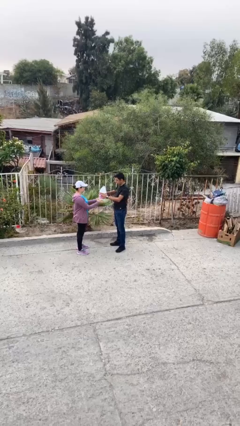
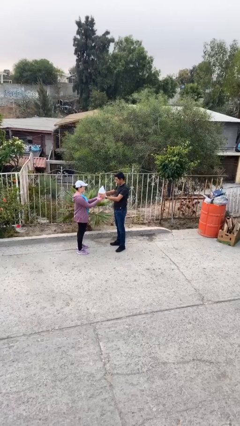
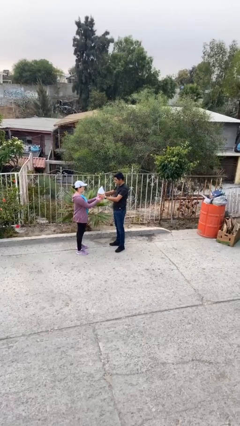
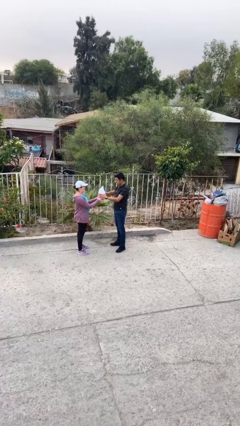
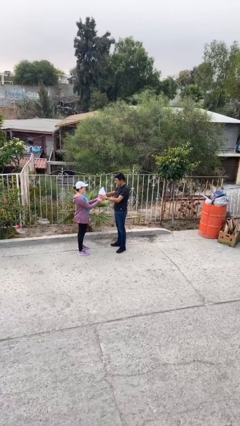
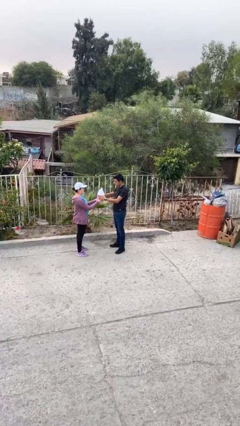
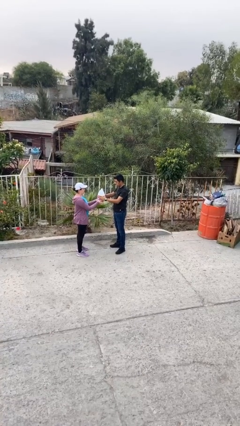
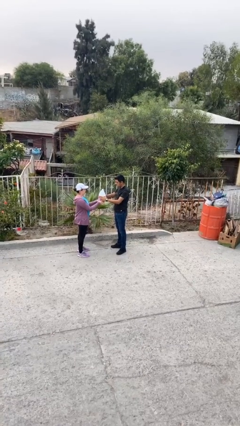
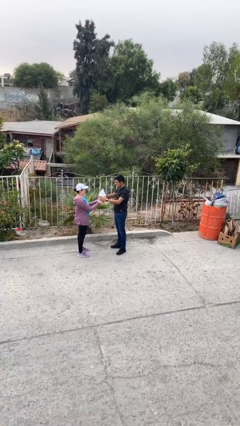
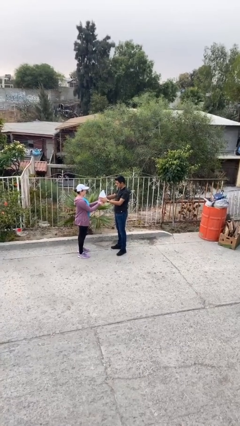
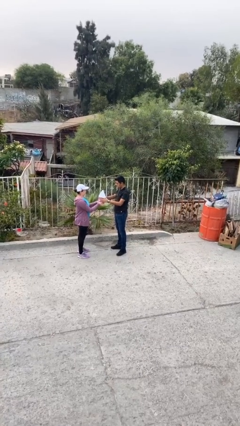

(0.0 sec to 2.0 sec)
person transfers object to person

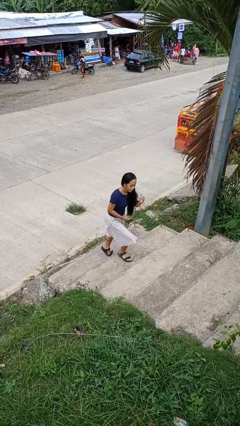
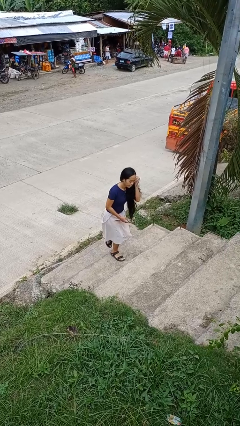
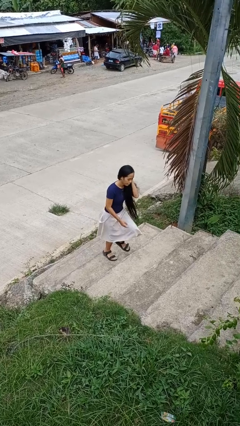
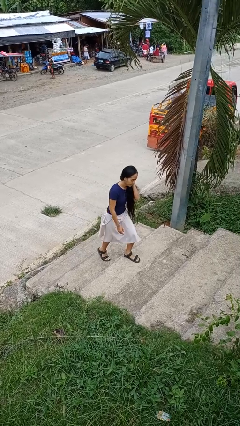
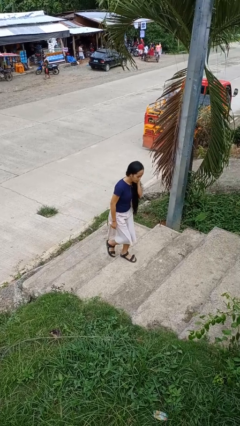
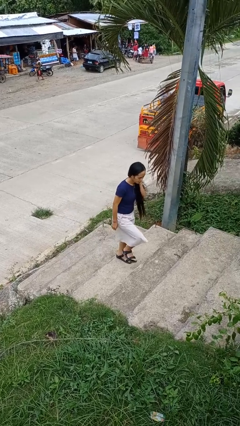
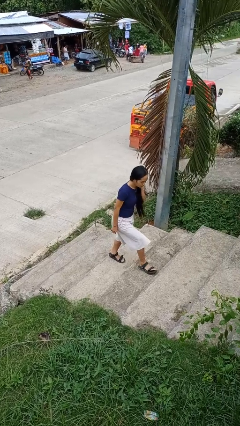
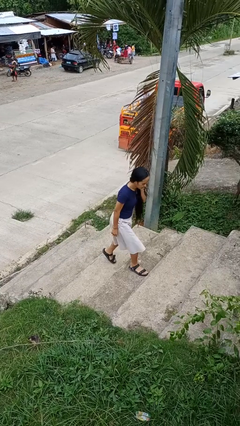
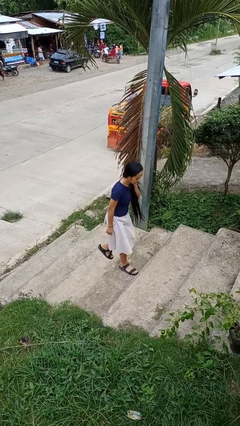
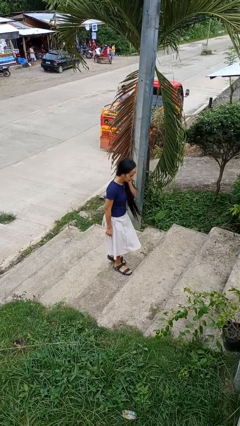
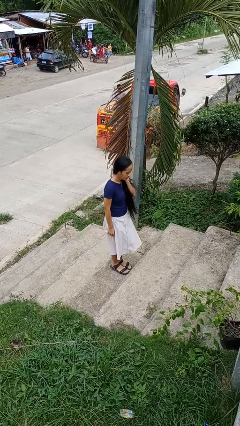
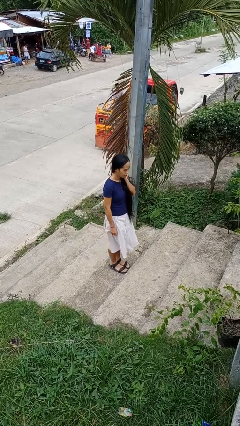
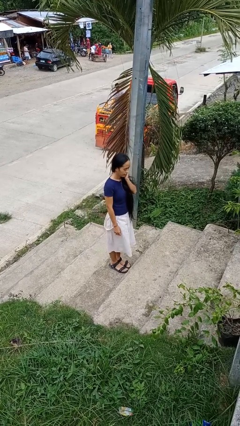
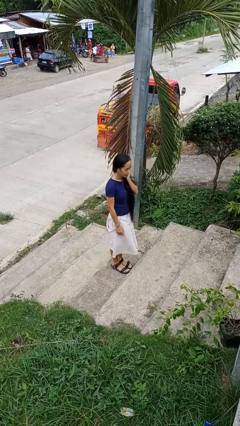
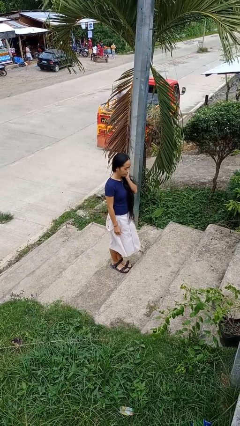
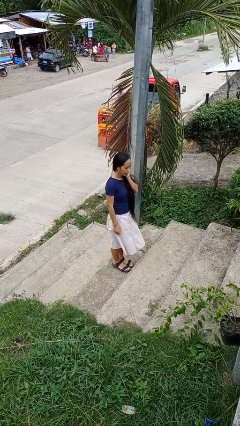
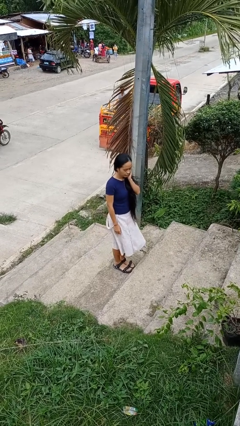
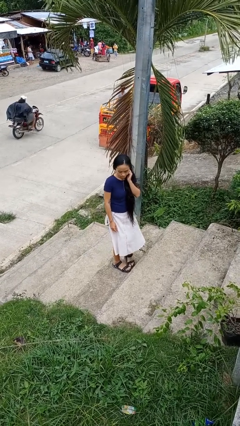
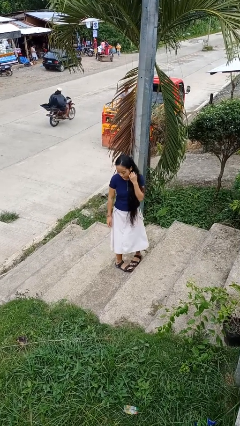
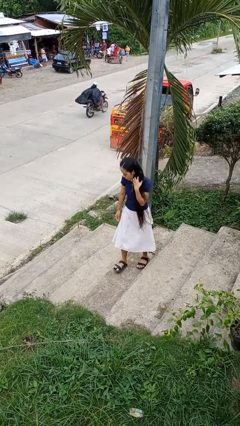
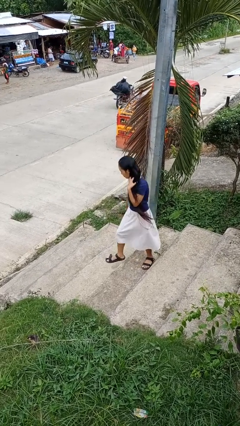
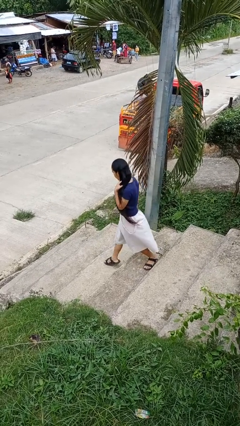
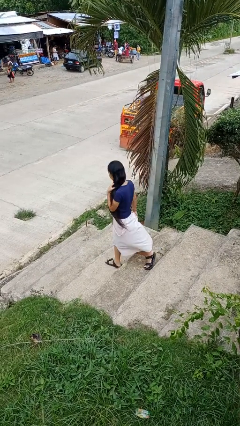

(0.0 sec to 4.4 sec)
person climbs up stairs

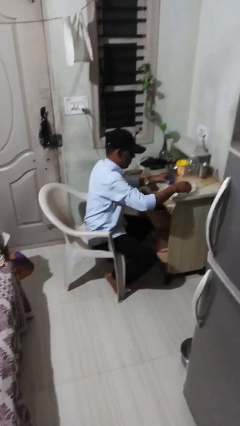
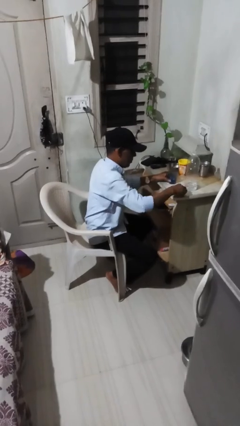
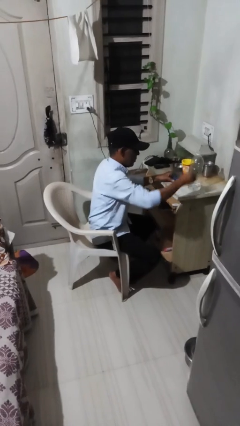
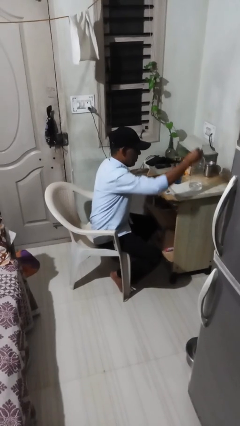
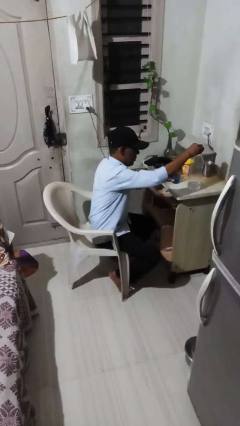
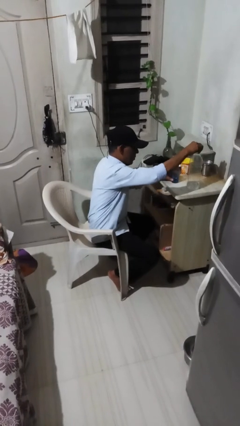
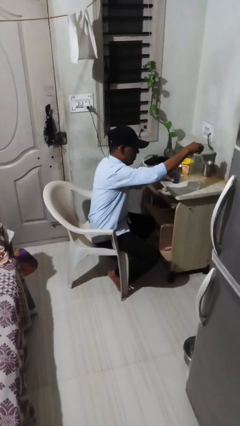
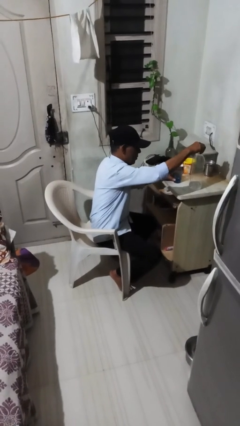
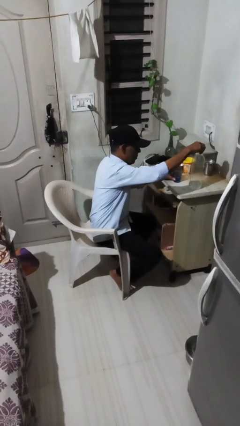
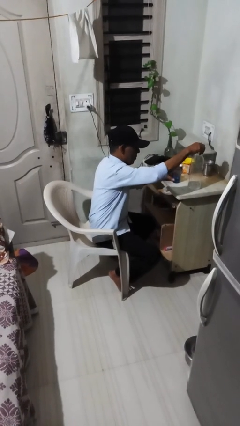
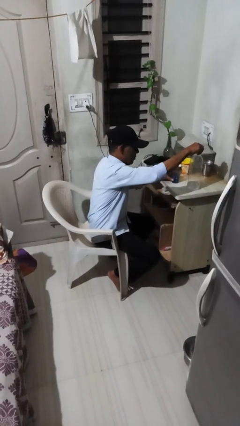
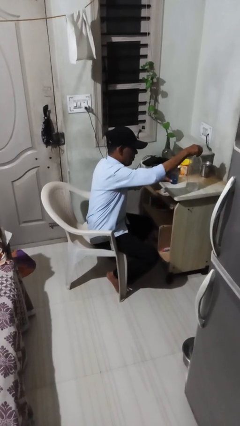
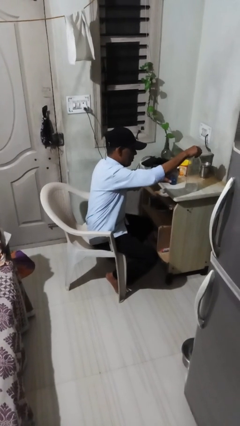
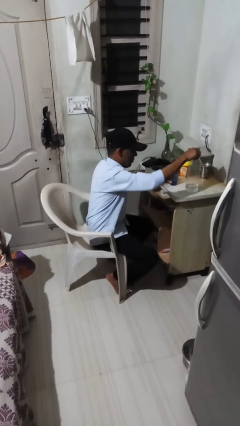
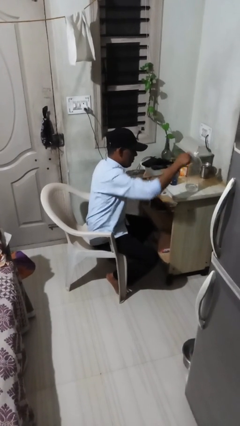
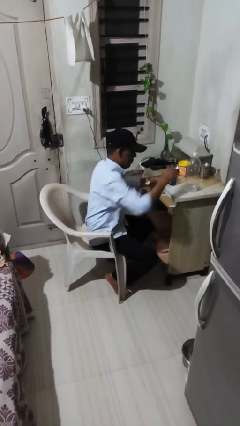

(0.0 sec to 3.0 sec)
person screws lid to bottle

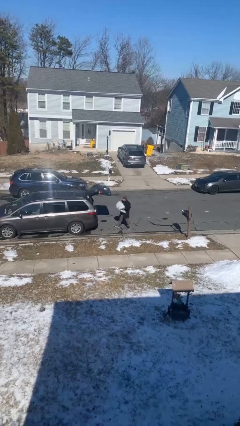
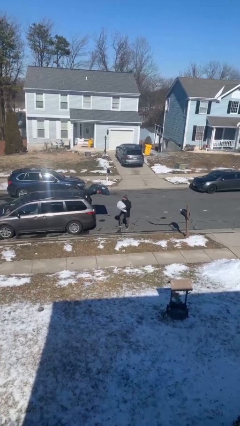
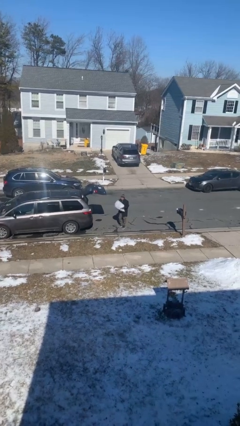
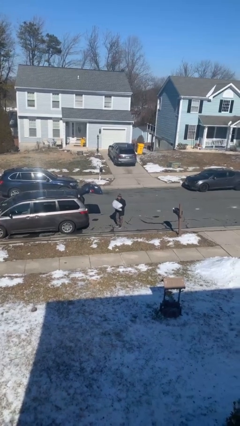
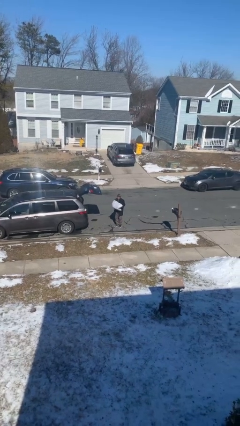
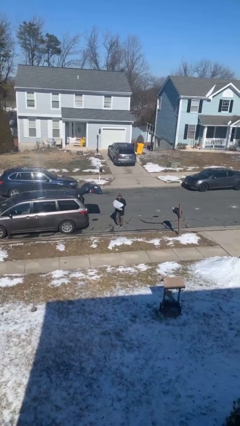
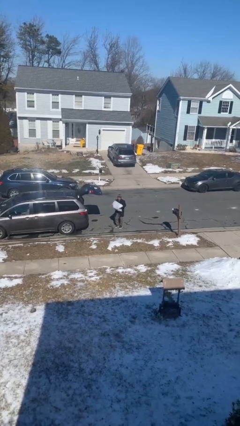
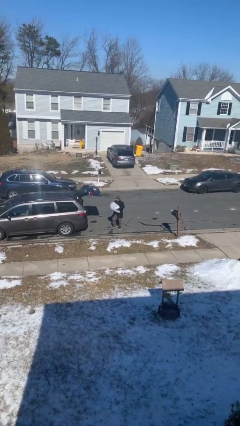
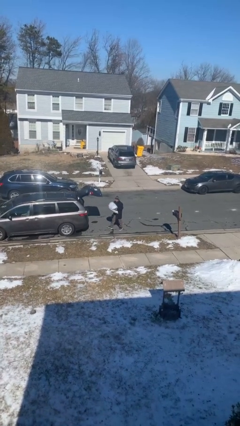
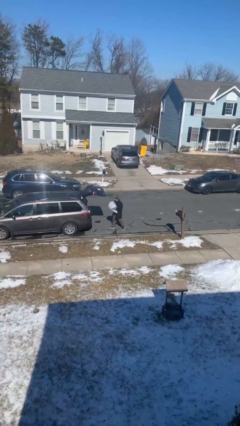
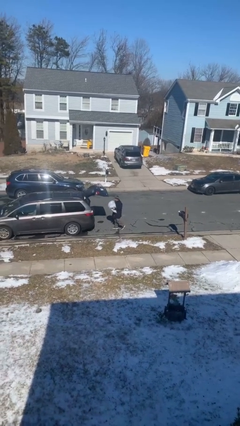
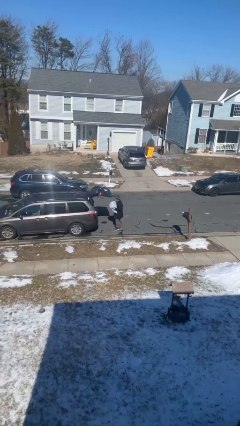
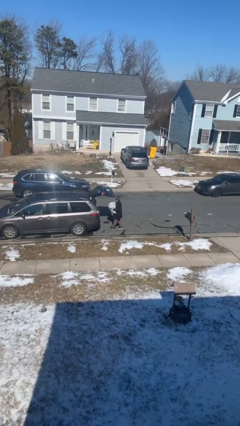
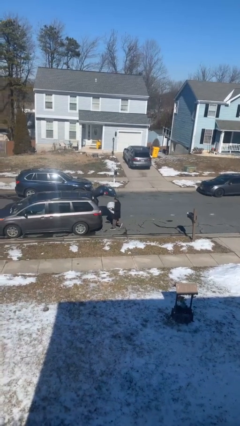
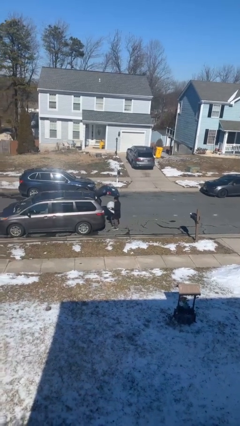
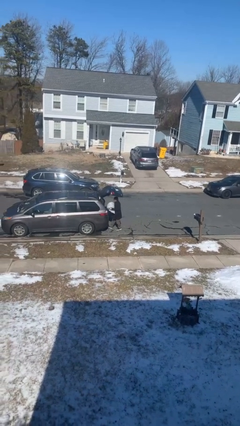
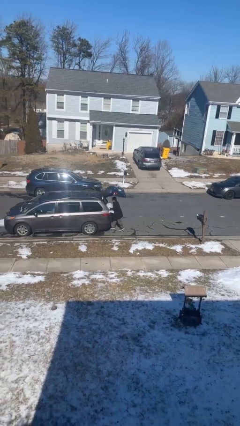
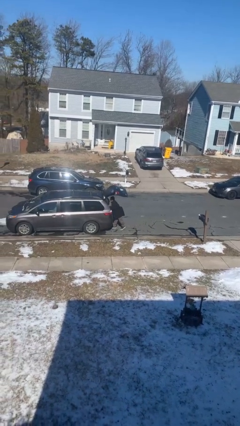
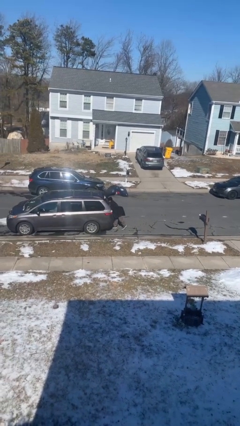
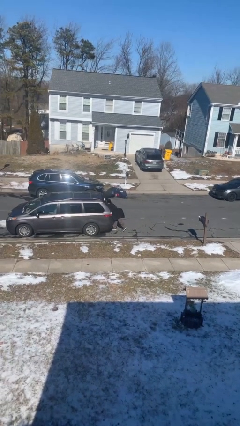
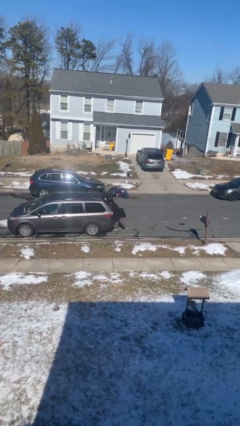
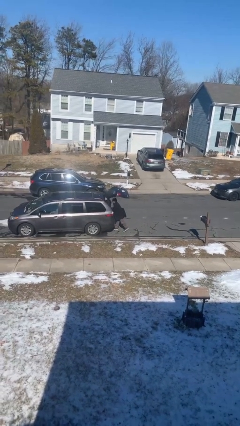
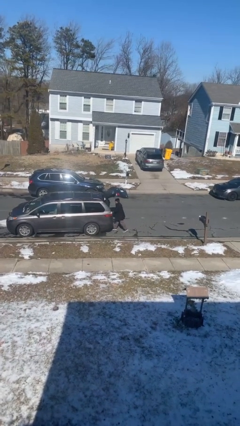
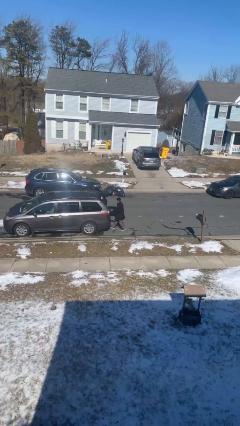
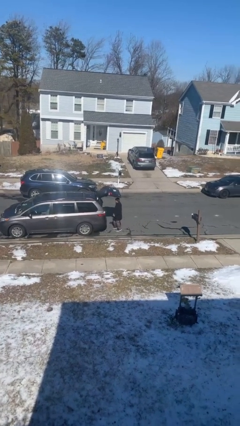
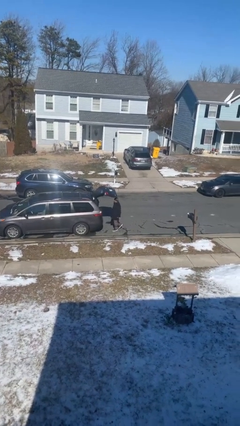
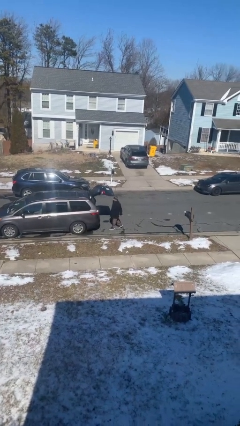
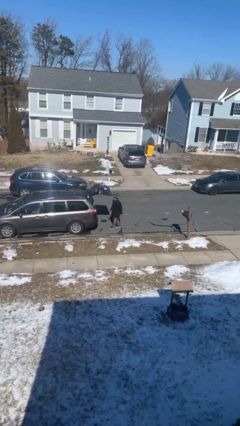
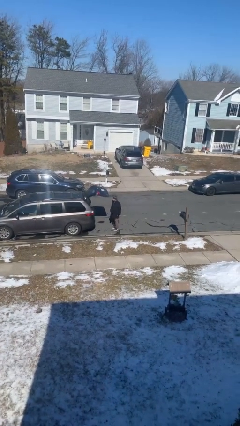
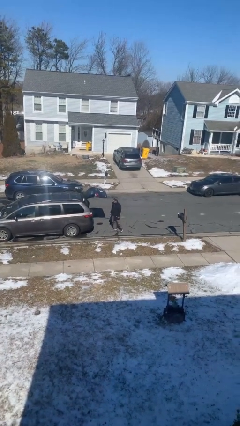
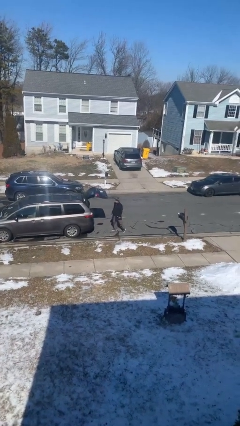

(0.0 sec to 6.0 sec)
person loads car

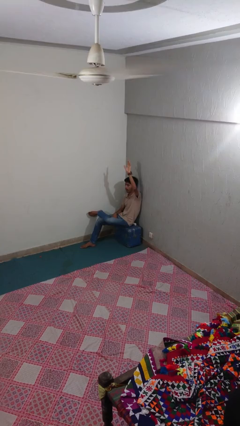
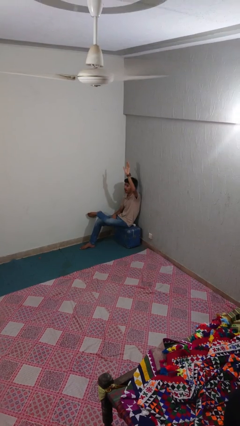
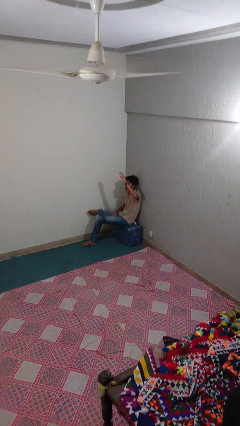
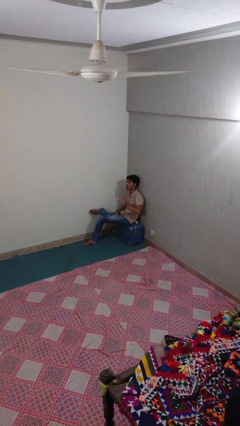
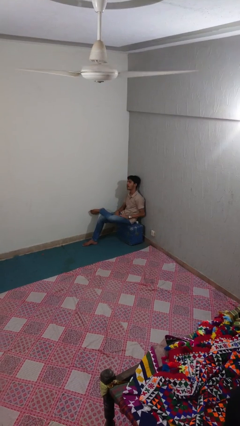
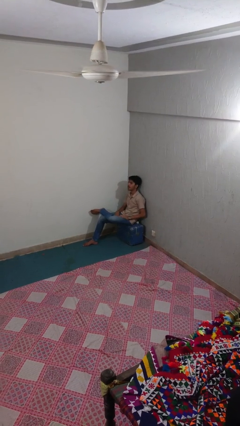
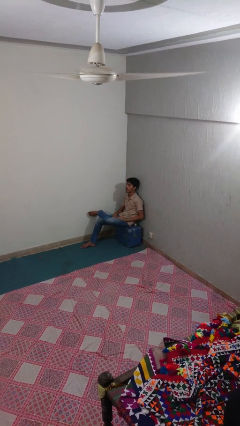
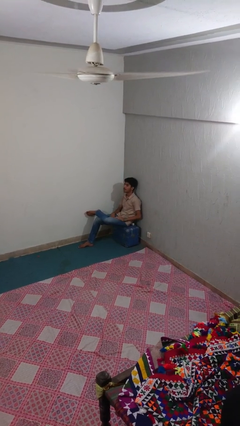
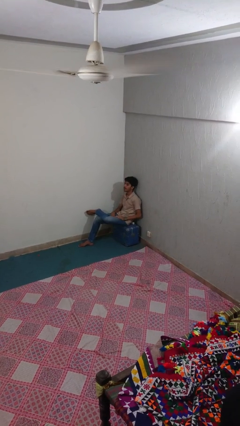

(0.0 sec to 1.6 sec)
person gestures lower hand

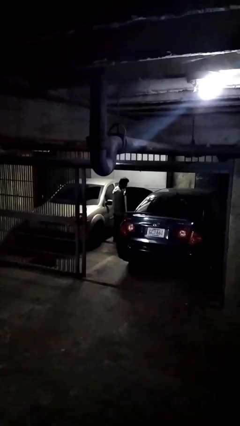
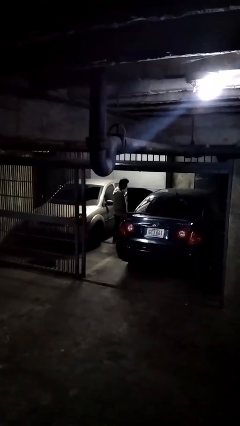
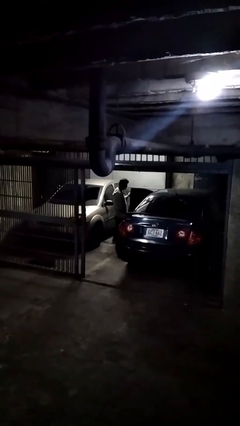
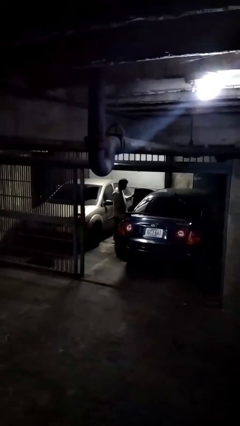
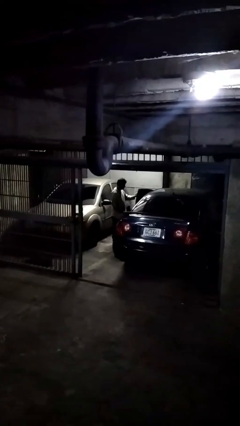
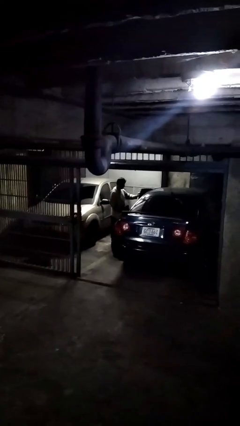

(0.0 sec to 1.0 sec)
person closes car door
